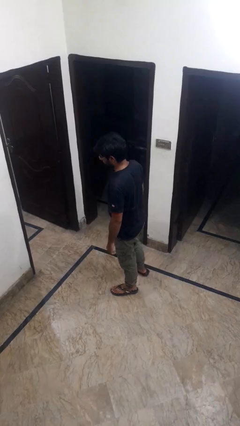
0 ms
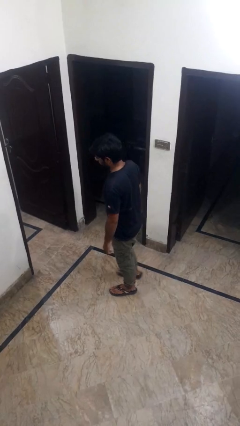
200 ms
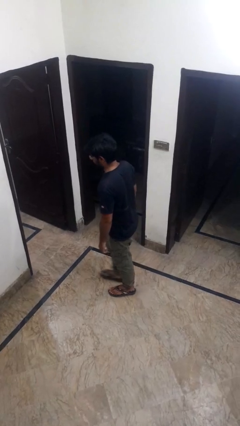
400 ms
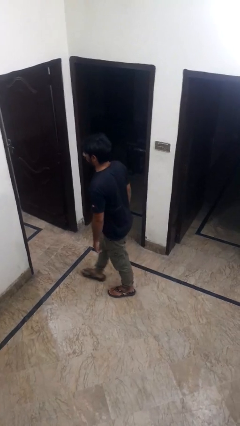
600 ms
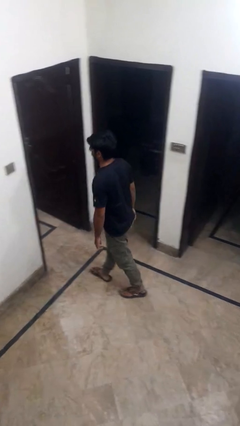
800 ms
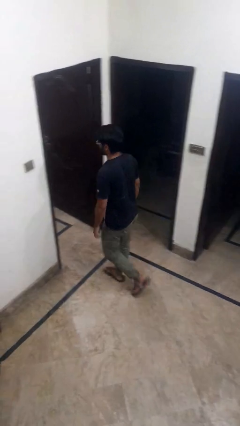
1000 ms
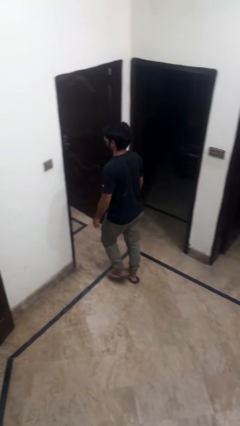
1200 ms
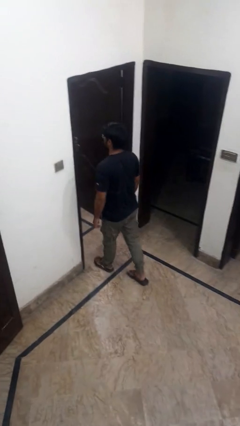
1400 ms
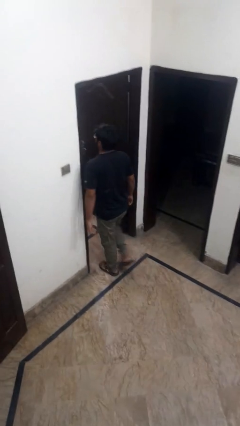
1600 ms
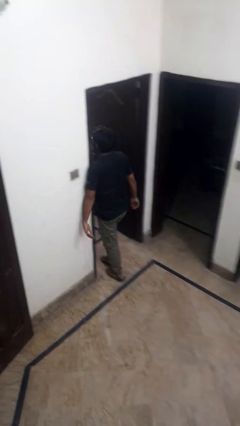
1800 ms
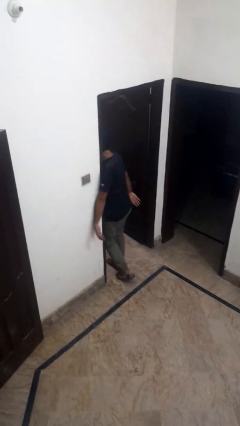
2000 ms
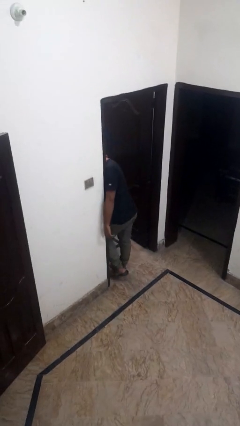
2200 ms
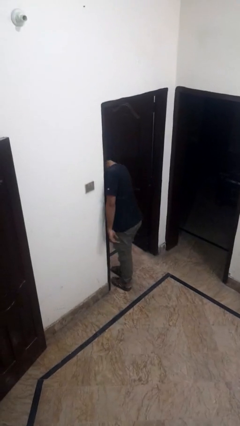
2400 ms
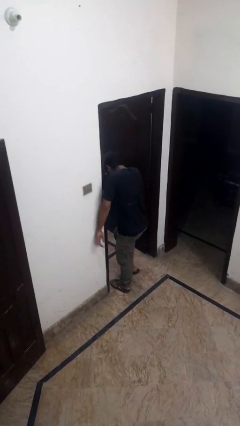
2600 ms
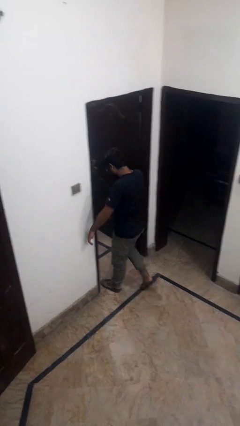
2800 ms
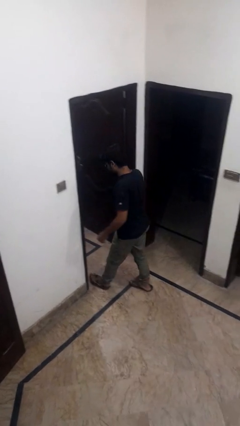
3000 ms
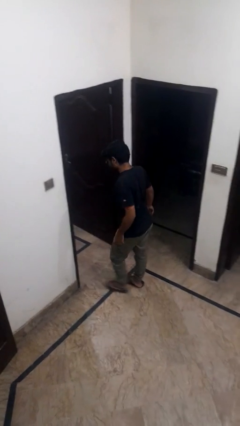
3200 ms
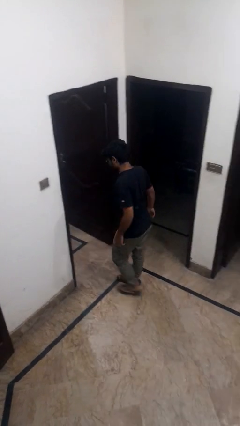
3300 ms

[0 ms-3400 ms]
person bumps into wall

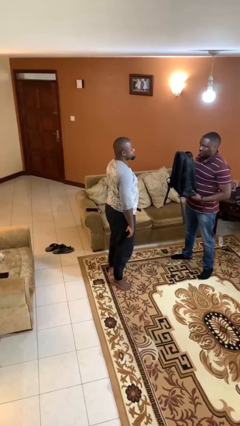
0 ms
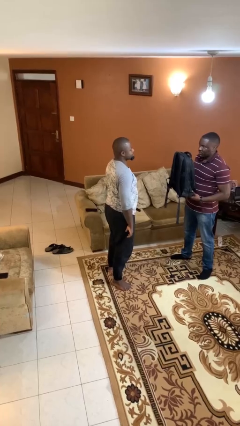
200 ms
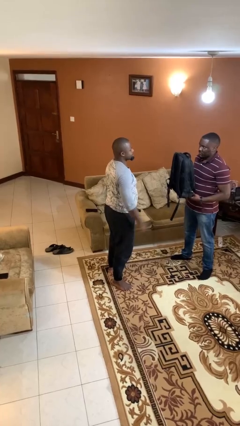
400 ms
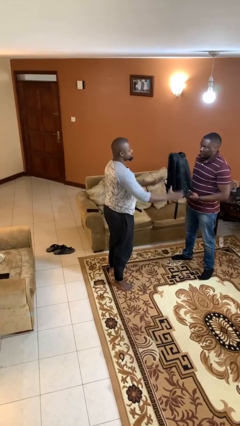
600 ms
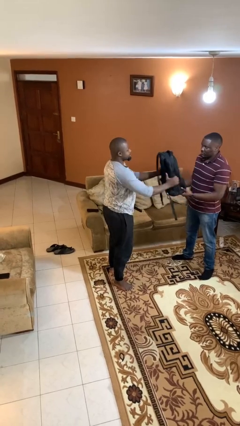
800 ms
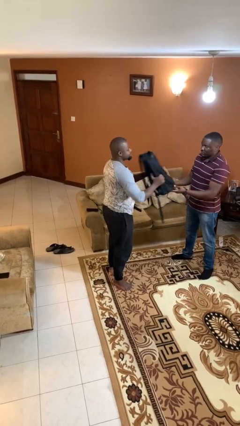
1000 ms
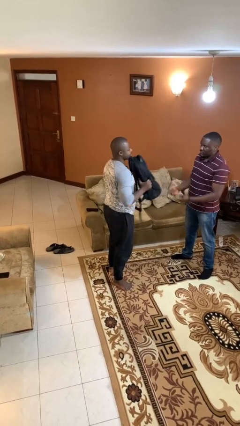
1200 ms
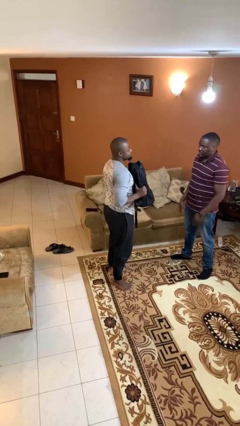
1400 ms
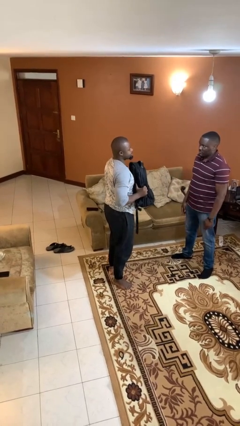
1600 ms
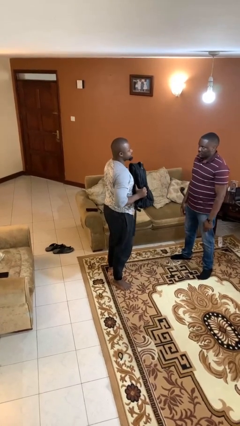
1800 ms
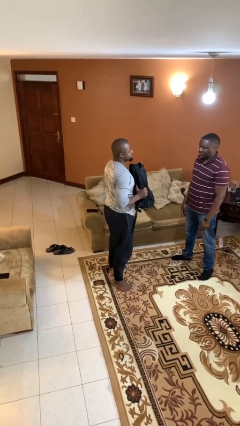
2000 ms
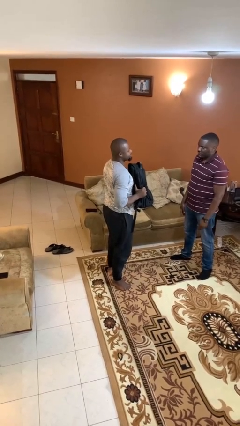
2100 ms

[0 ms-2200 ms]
person transfers object to person

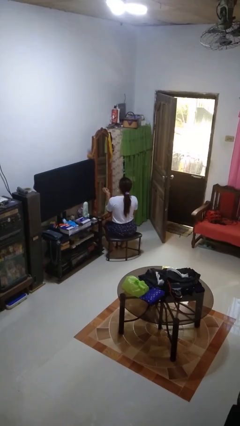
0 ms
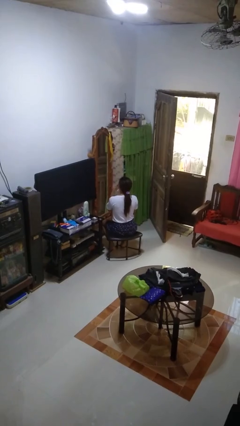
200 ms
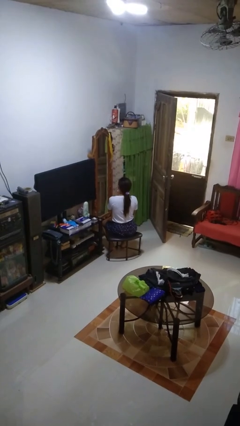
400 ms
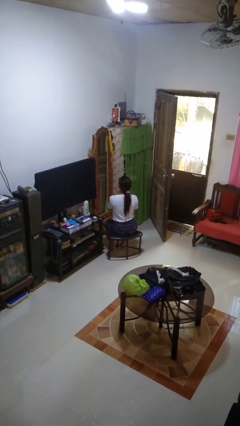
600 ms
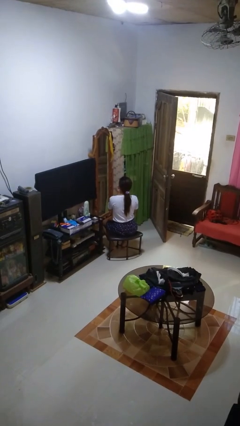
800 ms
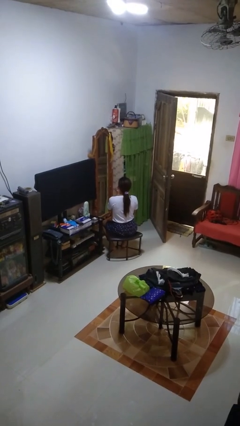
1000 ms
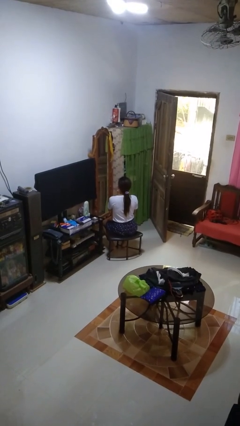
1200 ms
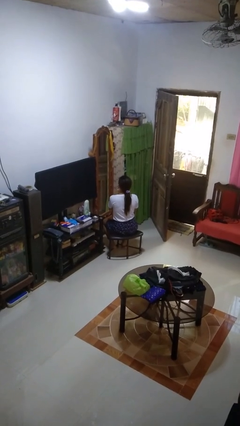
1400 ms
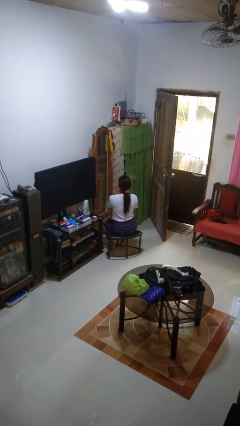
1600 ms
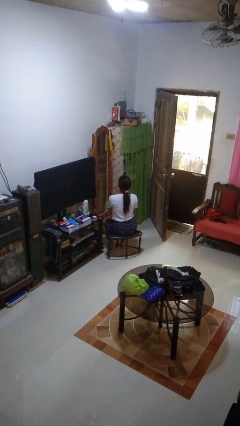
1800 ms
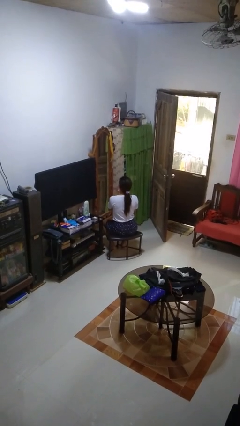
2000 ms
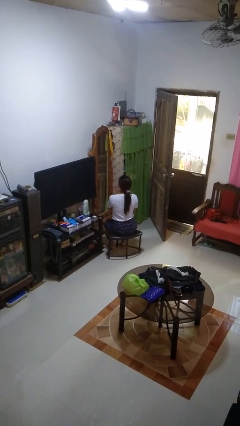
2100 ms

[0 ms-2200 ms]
person applies lip makeup

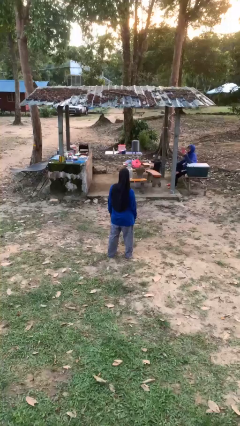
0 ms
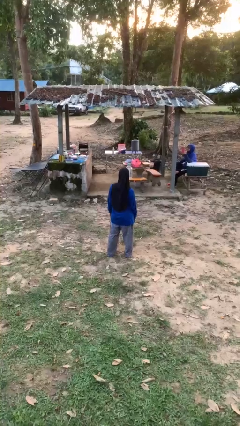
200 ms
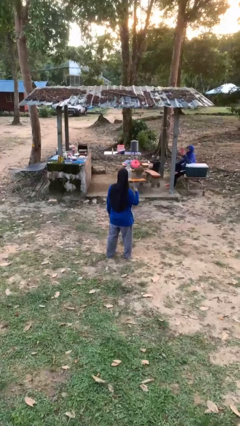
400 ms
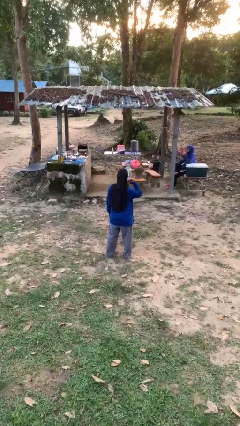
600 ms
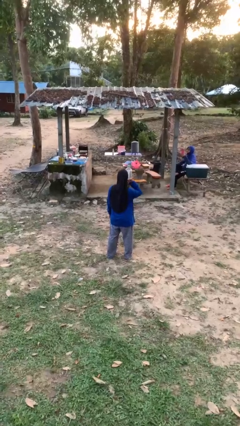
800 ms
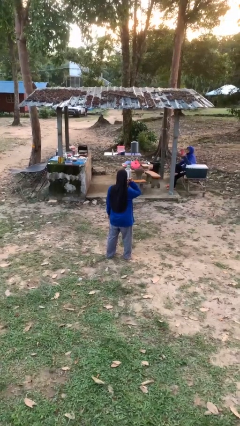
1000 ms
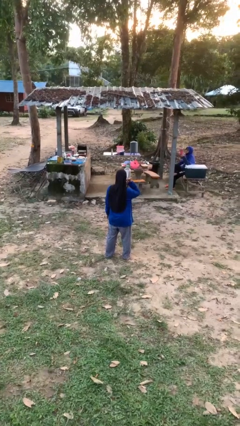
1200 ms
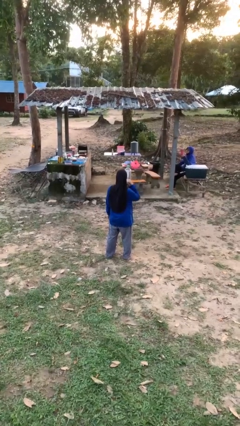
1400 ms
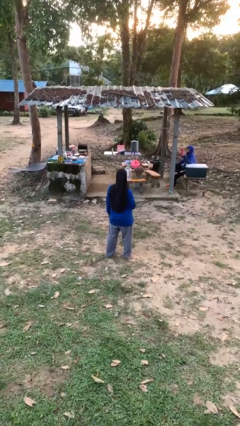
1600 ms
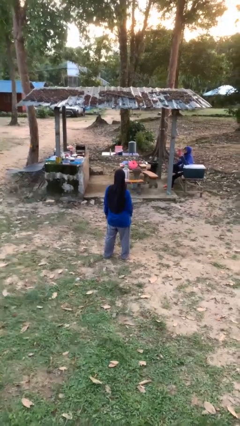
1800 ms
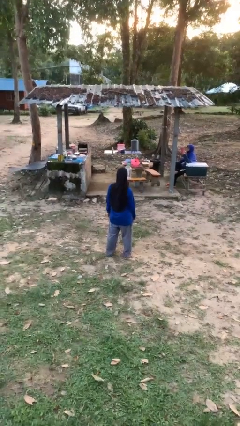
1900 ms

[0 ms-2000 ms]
person gestures call me

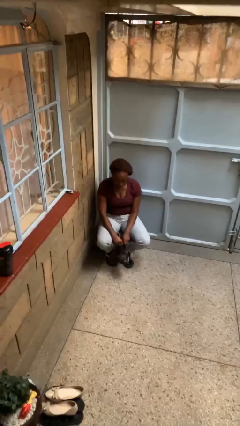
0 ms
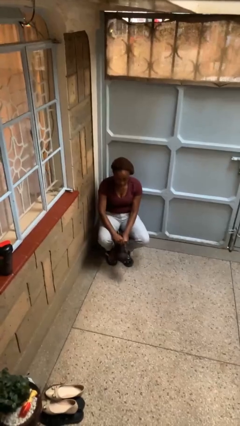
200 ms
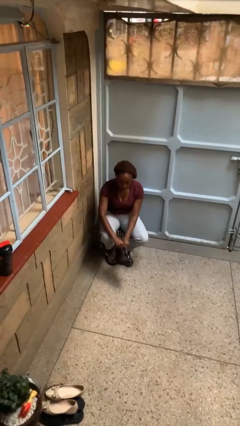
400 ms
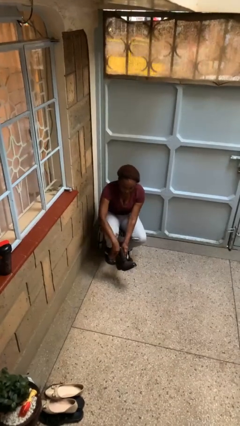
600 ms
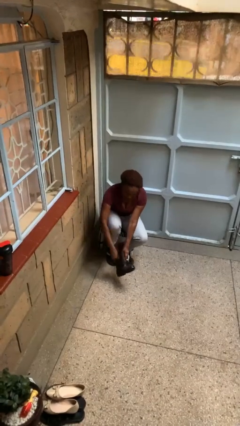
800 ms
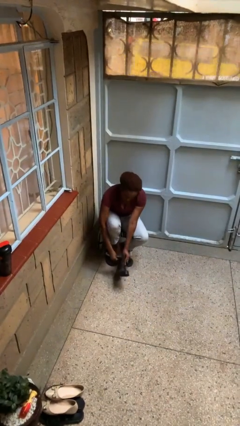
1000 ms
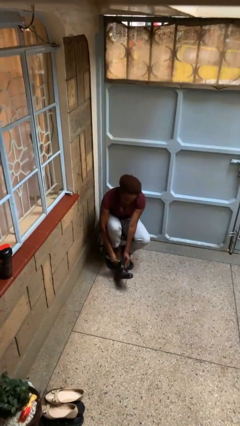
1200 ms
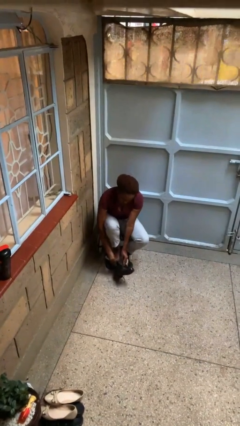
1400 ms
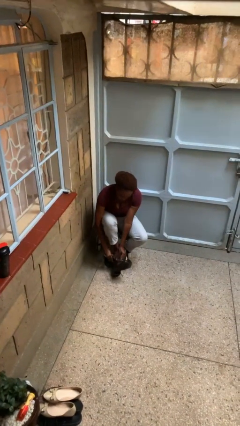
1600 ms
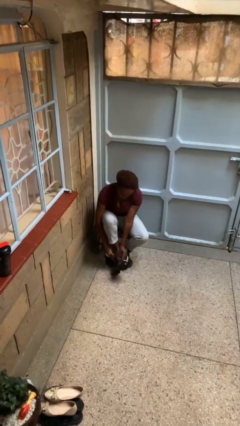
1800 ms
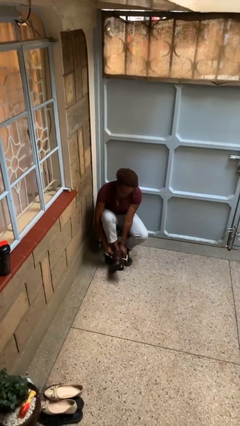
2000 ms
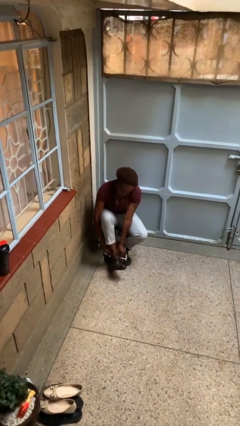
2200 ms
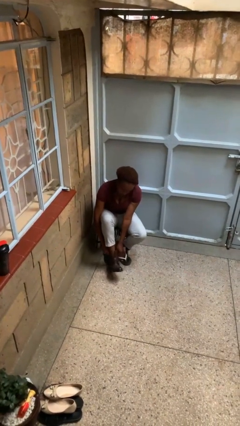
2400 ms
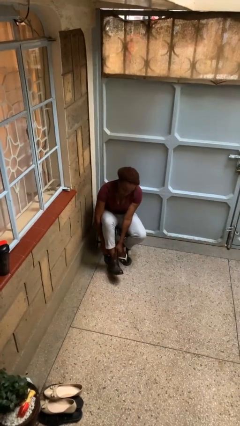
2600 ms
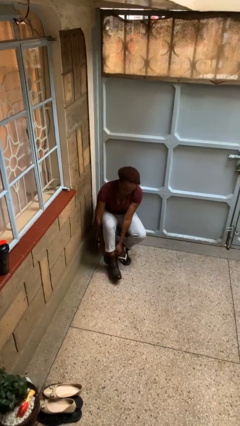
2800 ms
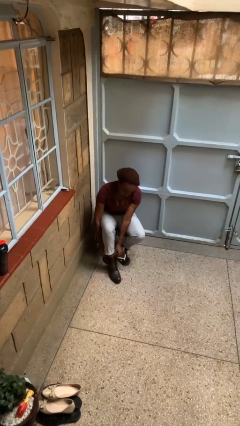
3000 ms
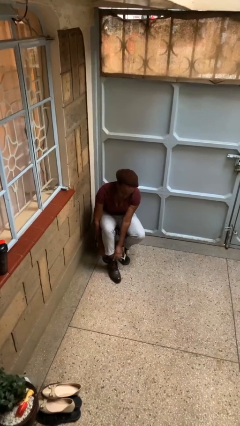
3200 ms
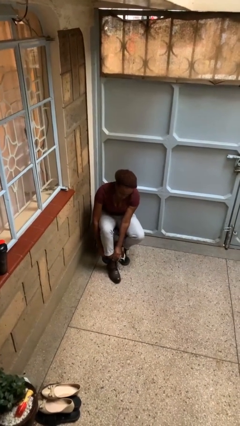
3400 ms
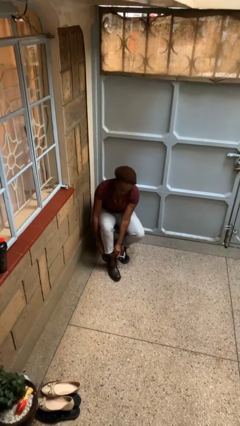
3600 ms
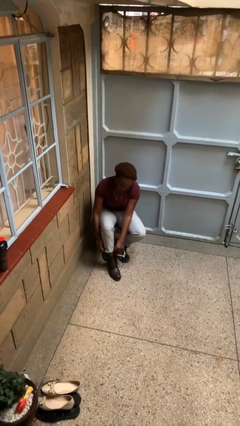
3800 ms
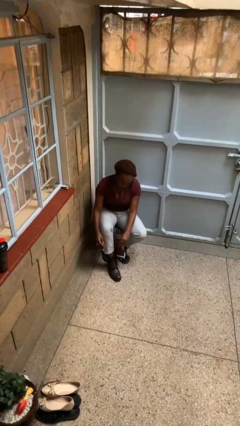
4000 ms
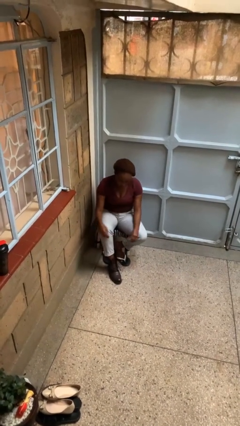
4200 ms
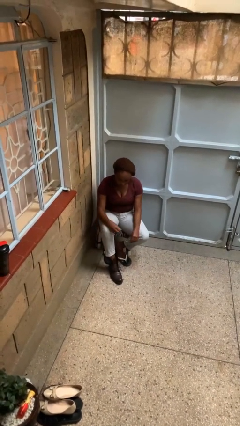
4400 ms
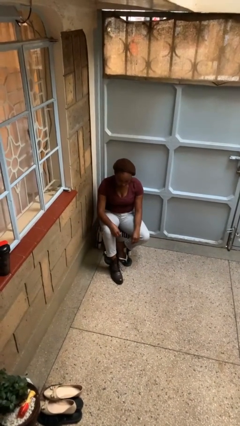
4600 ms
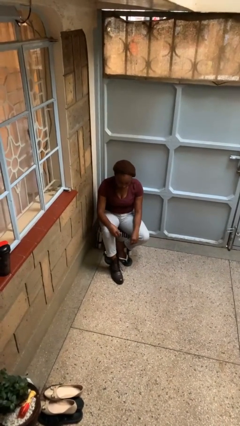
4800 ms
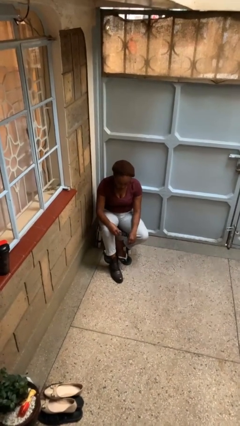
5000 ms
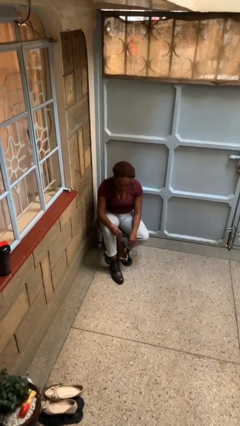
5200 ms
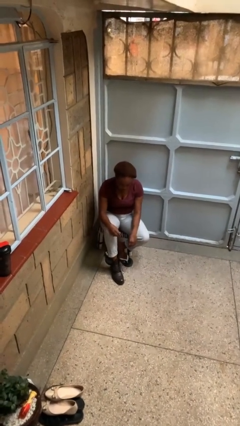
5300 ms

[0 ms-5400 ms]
person puts on boots

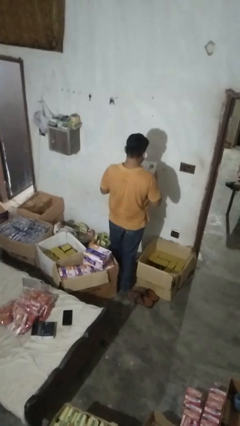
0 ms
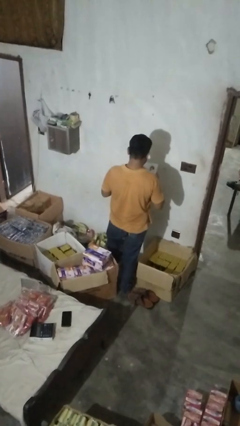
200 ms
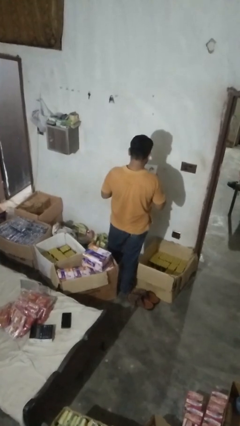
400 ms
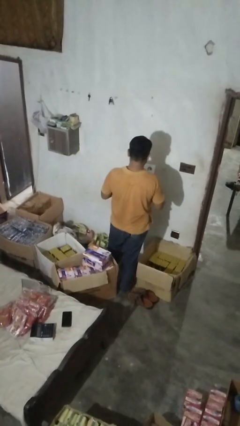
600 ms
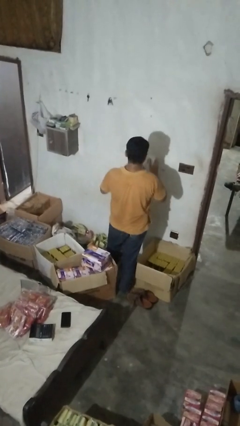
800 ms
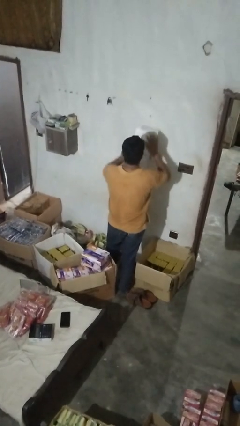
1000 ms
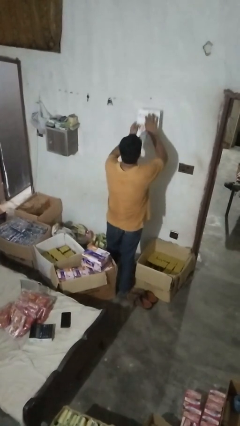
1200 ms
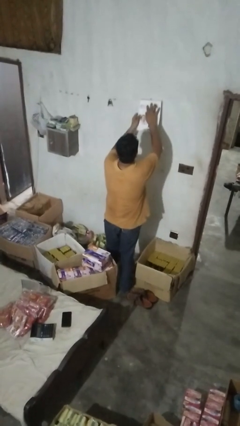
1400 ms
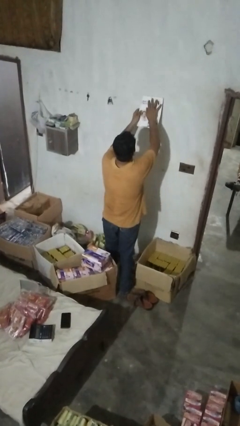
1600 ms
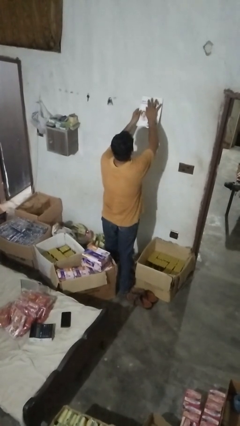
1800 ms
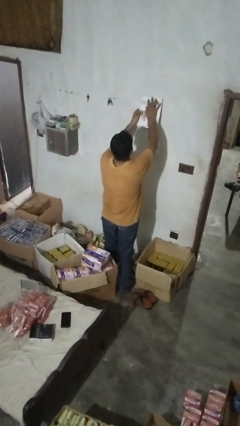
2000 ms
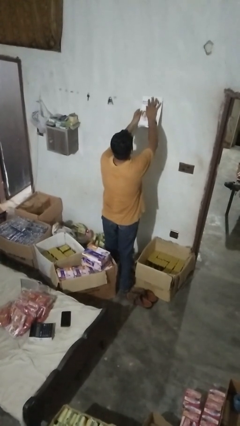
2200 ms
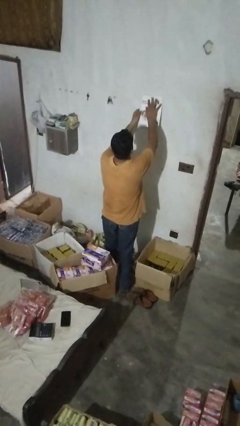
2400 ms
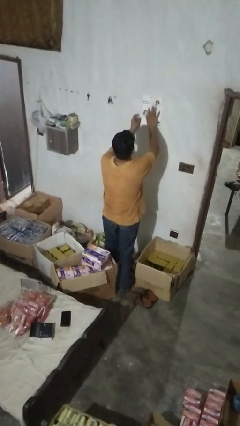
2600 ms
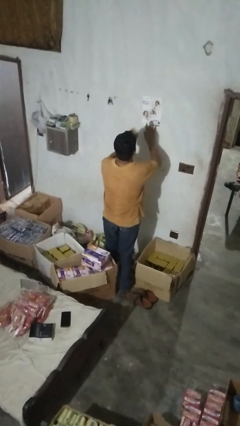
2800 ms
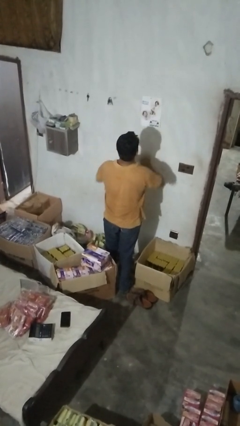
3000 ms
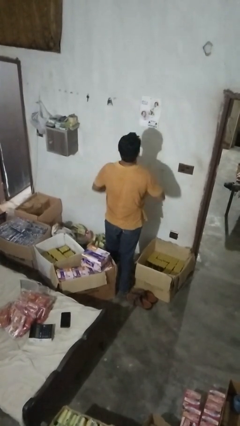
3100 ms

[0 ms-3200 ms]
person puts up picture frame
